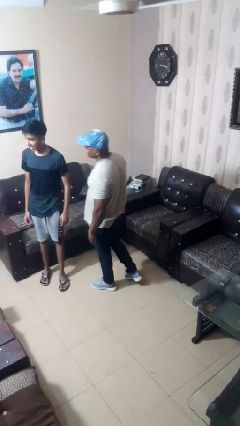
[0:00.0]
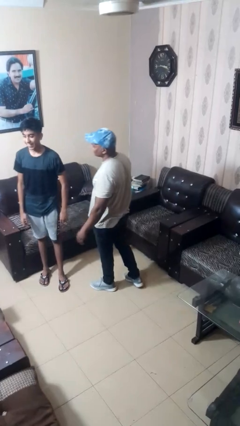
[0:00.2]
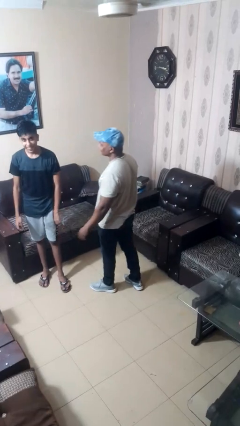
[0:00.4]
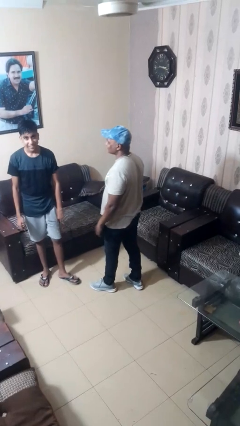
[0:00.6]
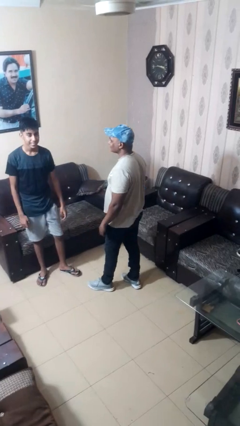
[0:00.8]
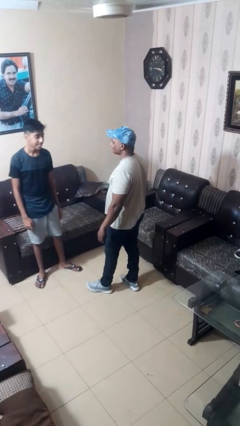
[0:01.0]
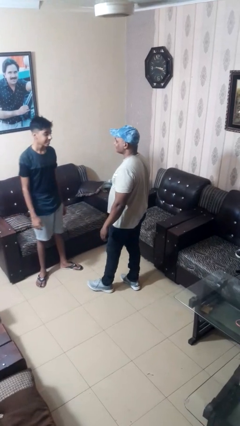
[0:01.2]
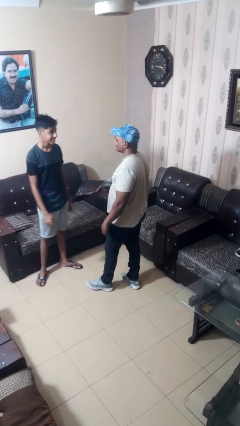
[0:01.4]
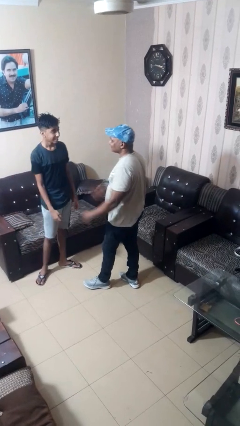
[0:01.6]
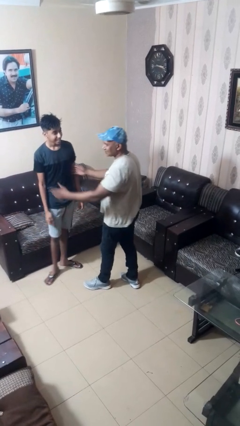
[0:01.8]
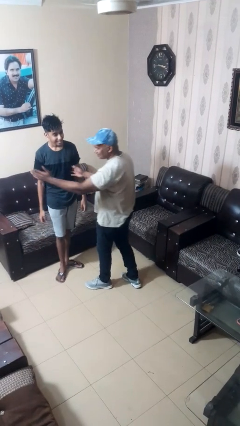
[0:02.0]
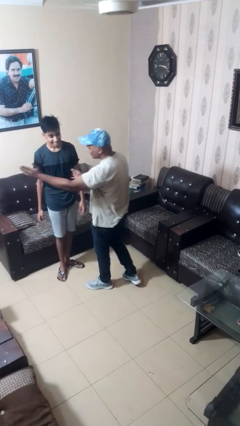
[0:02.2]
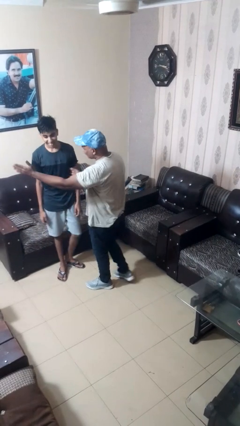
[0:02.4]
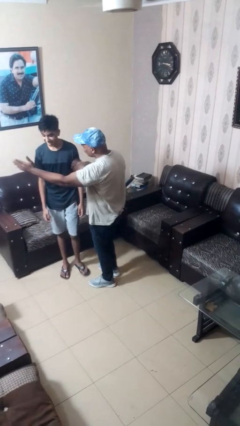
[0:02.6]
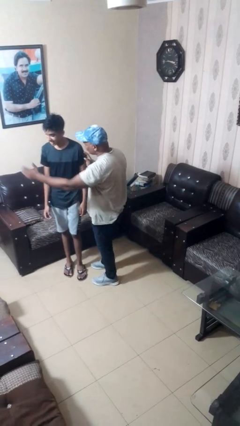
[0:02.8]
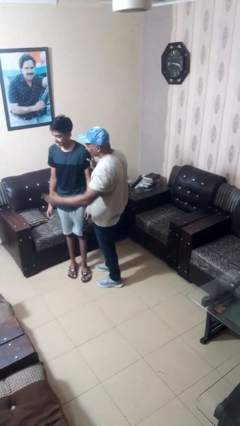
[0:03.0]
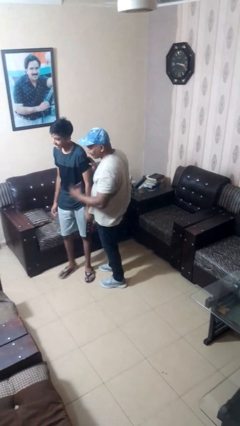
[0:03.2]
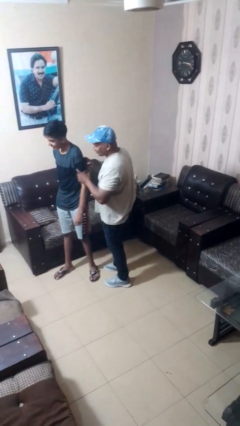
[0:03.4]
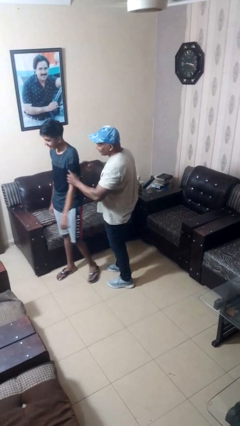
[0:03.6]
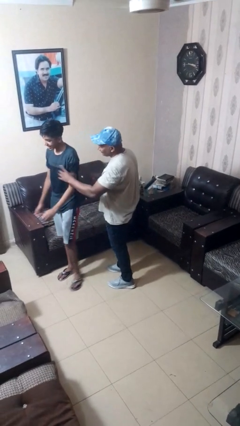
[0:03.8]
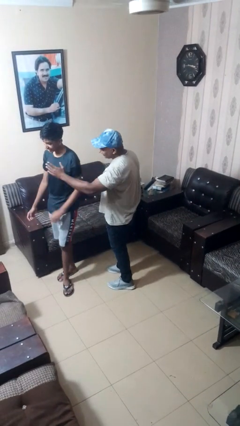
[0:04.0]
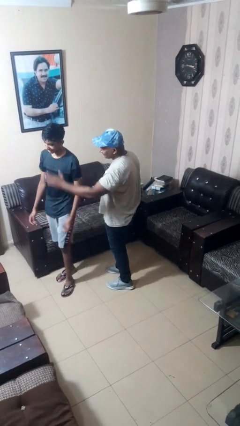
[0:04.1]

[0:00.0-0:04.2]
person shoves person

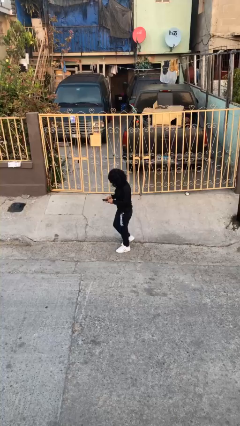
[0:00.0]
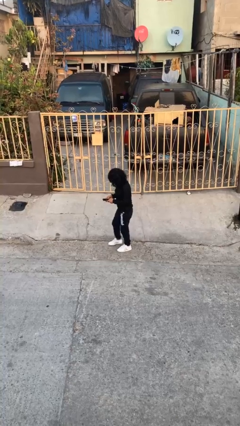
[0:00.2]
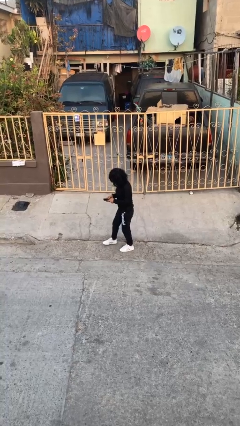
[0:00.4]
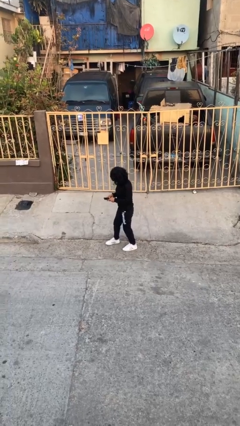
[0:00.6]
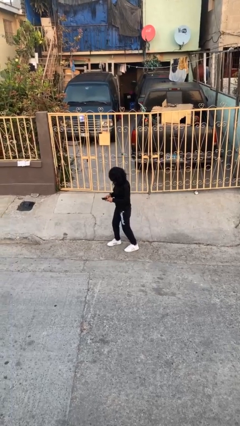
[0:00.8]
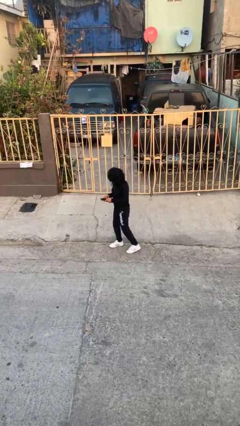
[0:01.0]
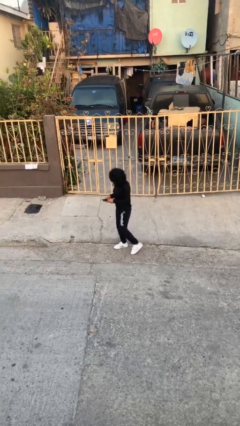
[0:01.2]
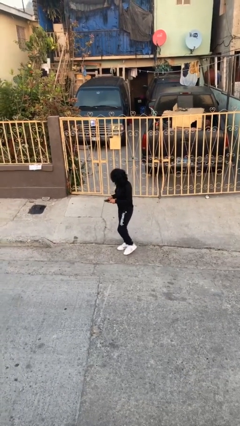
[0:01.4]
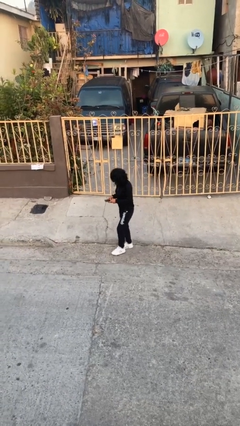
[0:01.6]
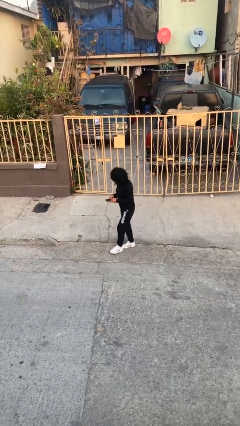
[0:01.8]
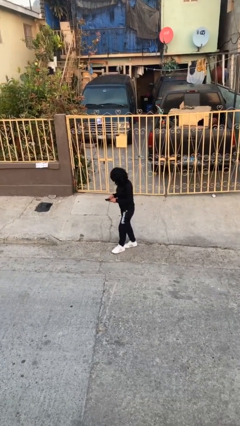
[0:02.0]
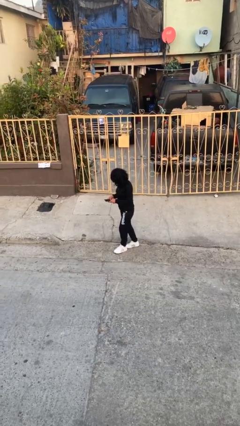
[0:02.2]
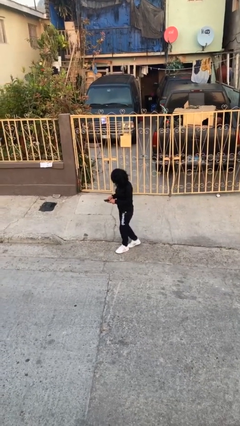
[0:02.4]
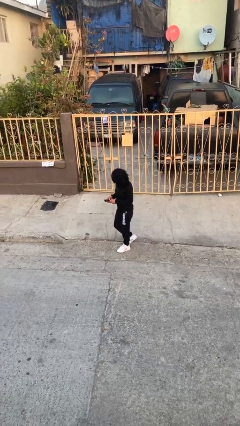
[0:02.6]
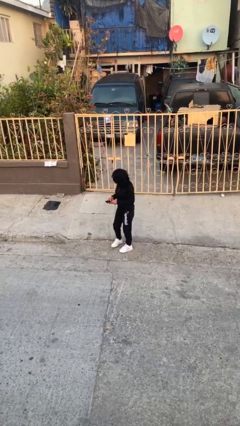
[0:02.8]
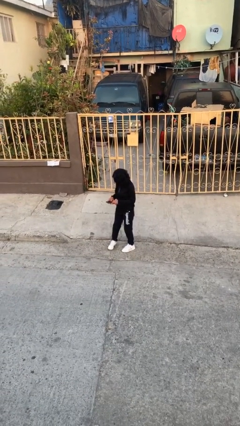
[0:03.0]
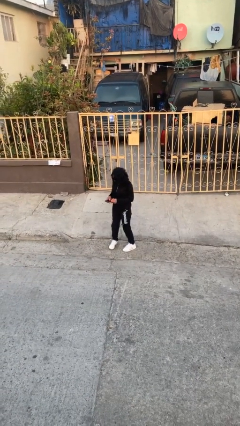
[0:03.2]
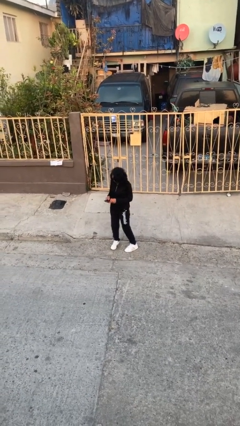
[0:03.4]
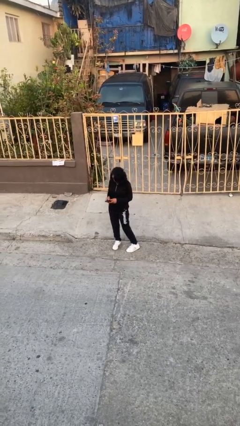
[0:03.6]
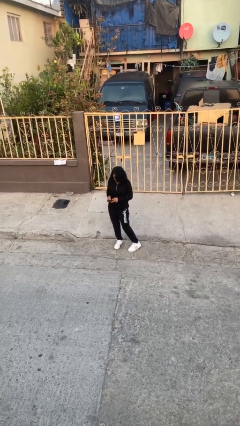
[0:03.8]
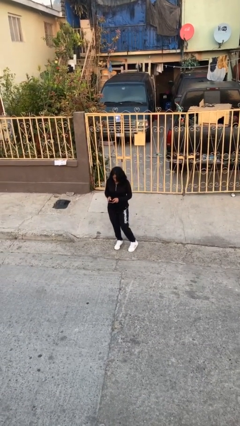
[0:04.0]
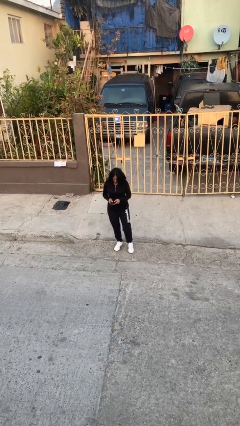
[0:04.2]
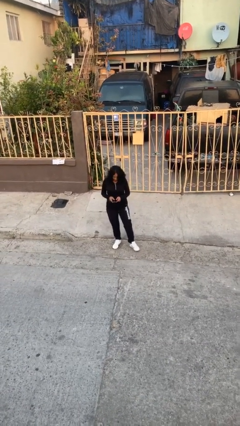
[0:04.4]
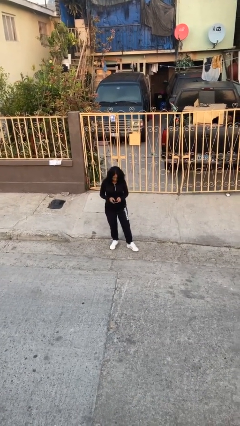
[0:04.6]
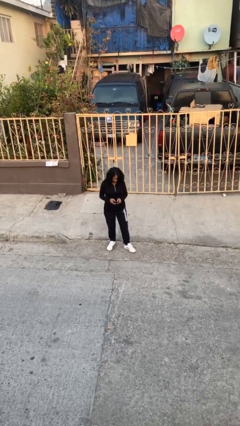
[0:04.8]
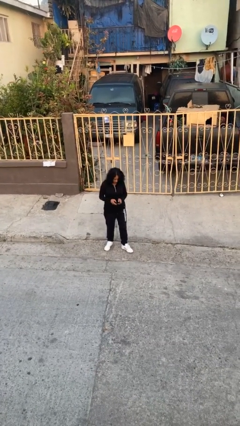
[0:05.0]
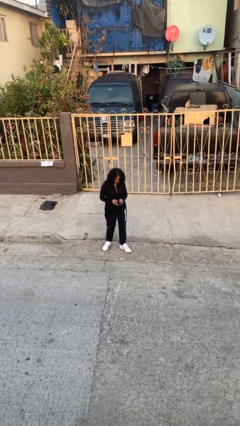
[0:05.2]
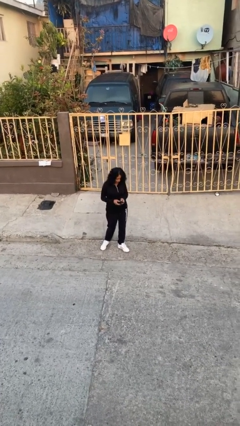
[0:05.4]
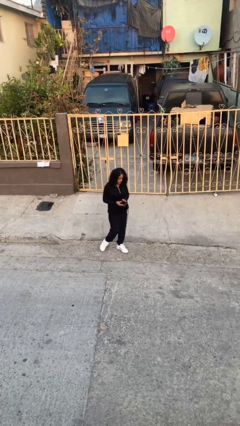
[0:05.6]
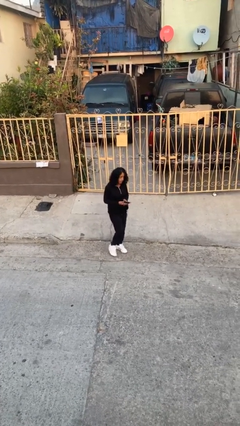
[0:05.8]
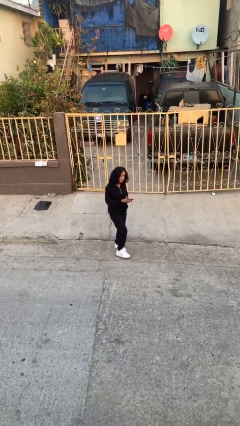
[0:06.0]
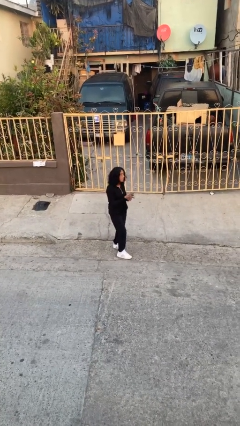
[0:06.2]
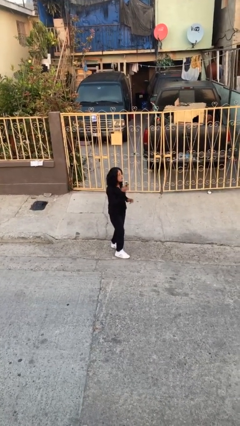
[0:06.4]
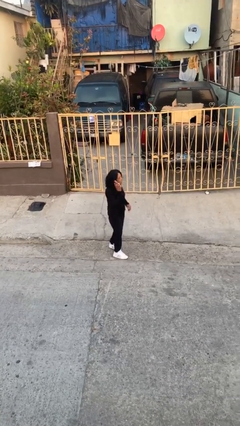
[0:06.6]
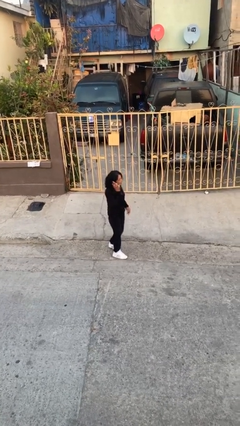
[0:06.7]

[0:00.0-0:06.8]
person texts on phone

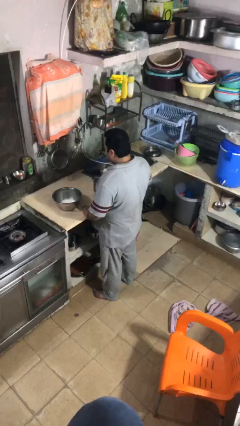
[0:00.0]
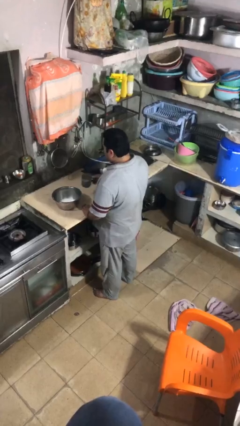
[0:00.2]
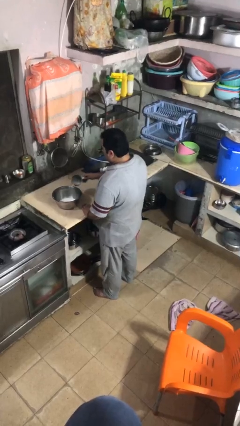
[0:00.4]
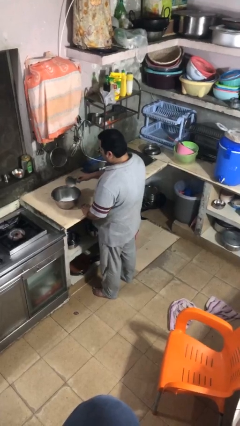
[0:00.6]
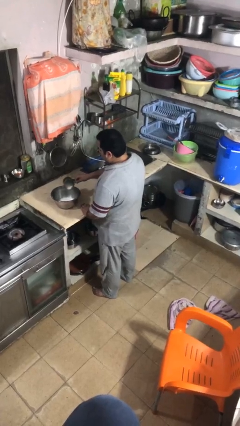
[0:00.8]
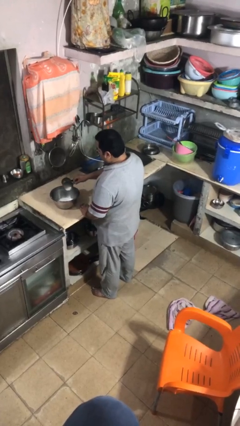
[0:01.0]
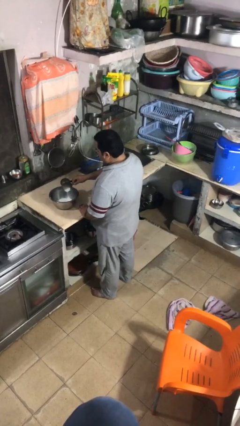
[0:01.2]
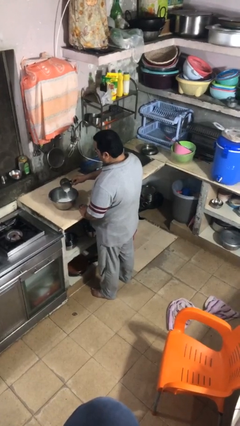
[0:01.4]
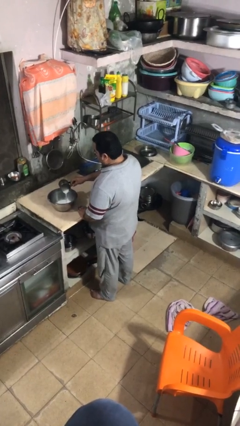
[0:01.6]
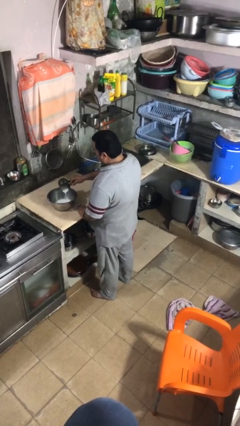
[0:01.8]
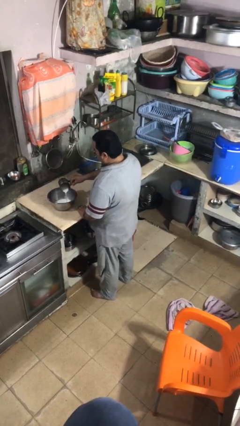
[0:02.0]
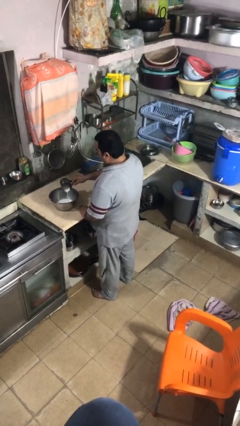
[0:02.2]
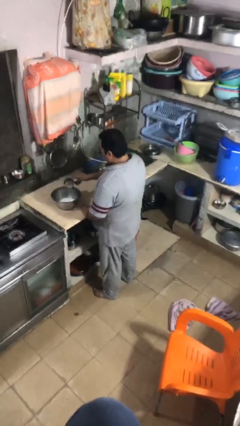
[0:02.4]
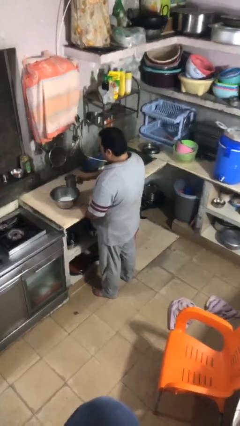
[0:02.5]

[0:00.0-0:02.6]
person pours into bowl

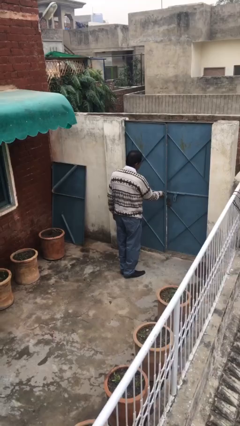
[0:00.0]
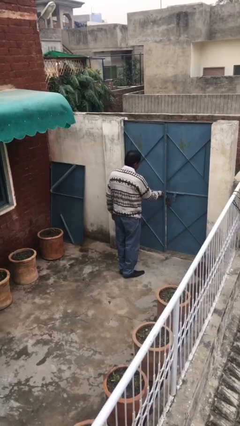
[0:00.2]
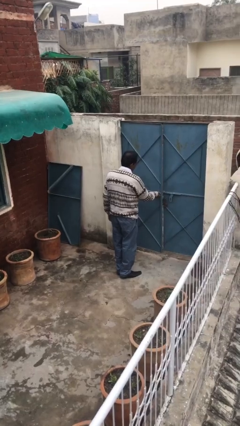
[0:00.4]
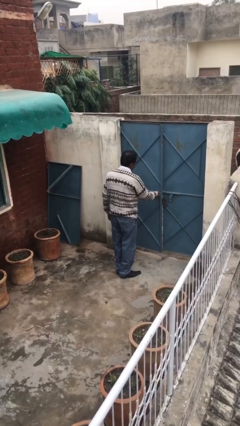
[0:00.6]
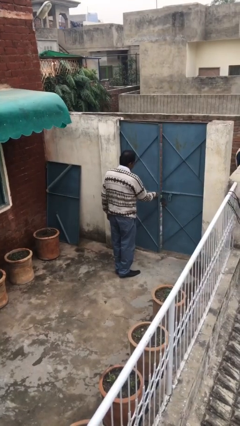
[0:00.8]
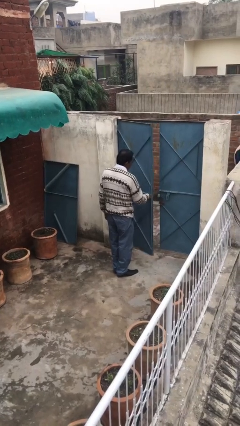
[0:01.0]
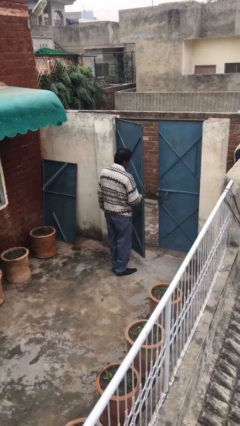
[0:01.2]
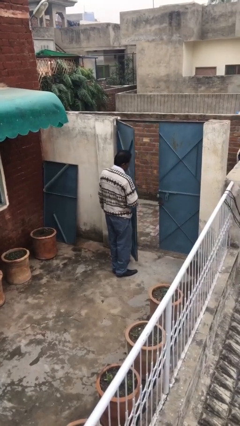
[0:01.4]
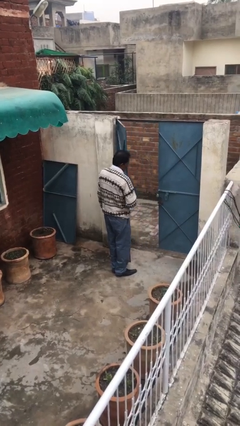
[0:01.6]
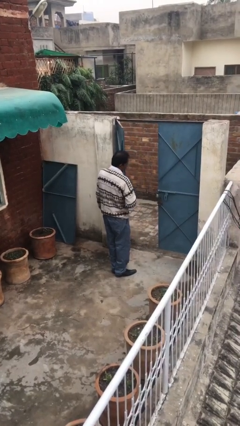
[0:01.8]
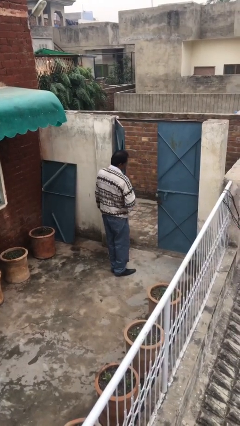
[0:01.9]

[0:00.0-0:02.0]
person opens facility door

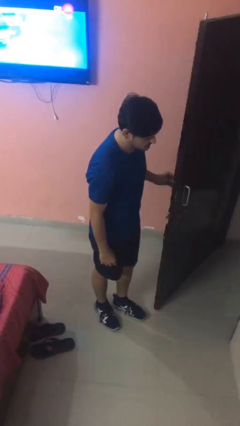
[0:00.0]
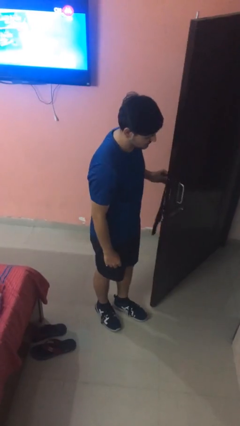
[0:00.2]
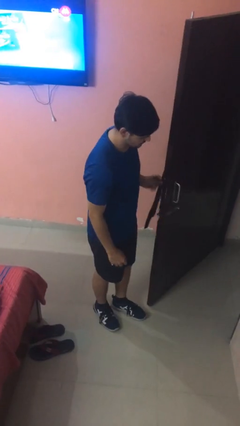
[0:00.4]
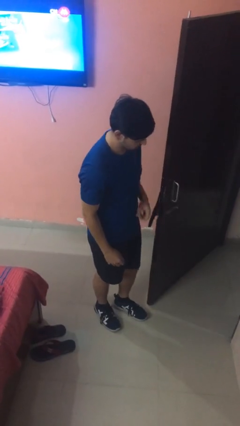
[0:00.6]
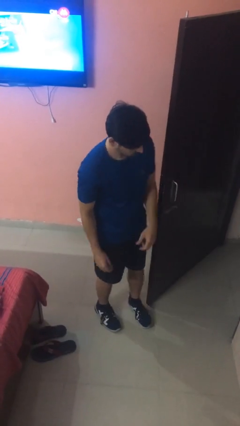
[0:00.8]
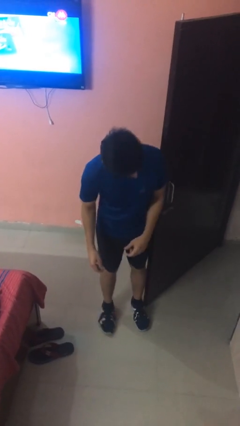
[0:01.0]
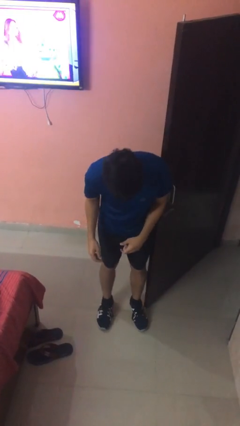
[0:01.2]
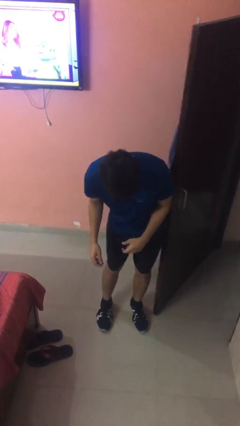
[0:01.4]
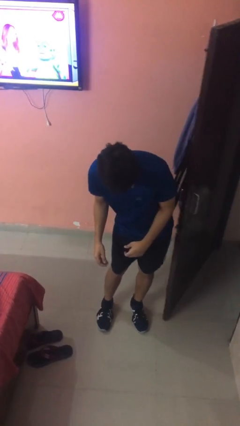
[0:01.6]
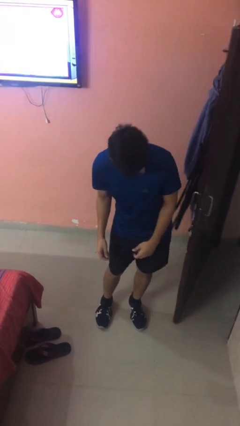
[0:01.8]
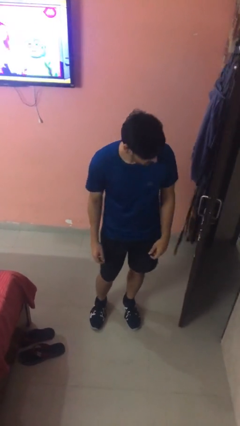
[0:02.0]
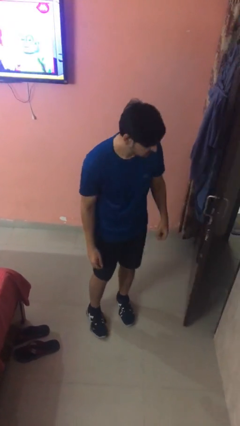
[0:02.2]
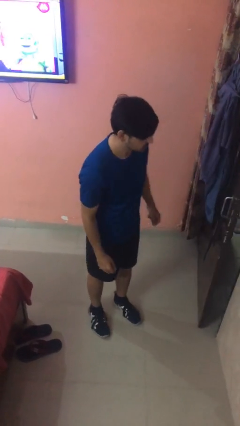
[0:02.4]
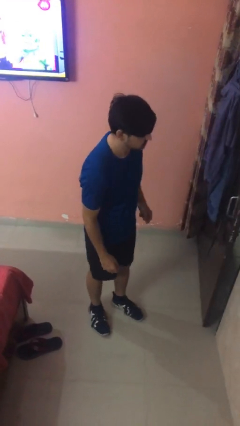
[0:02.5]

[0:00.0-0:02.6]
person closes door with hip
